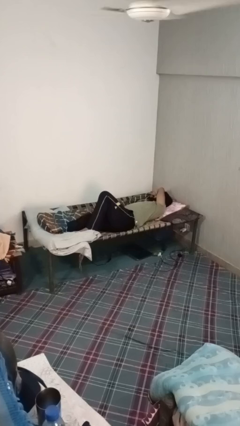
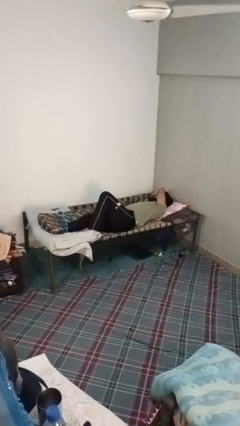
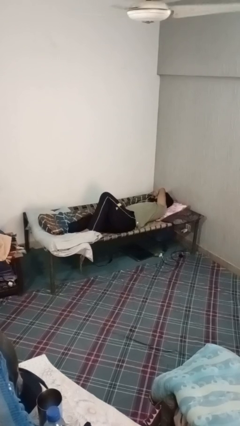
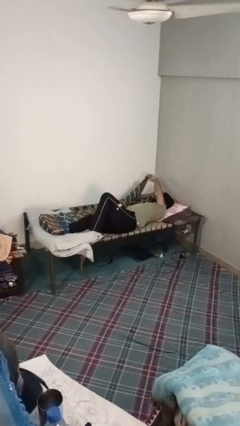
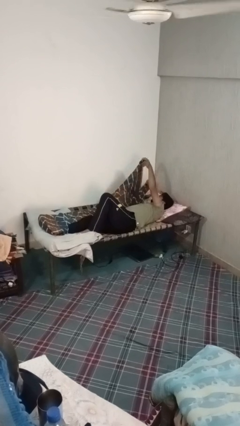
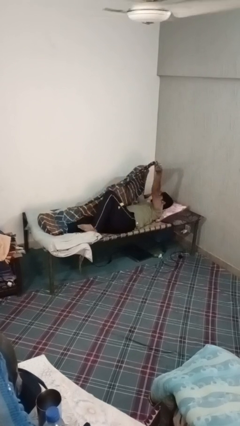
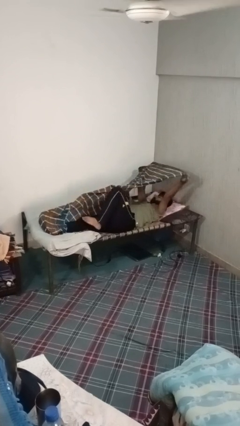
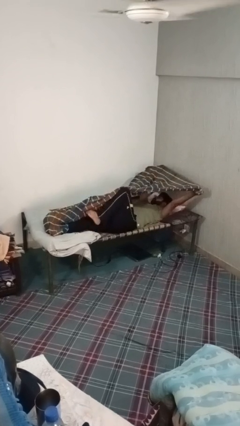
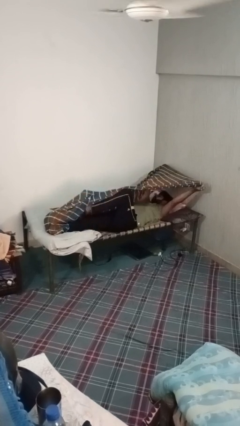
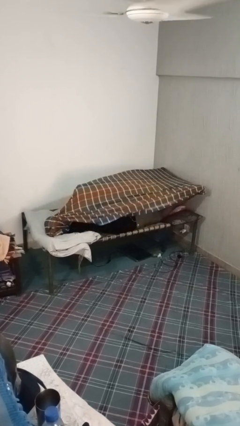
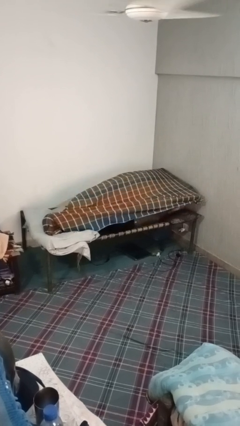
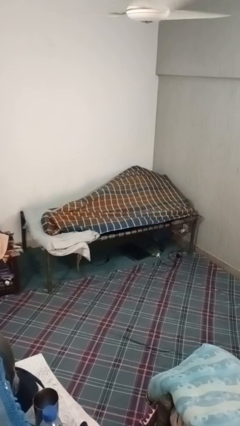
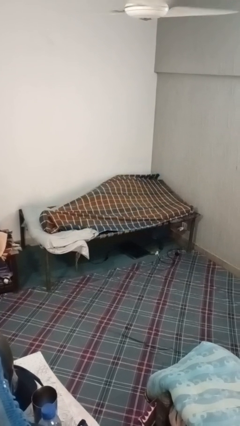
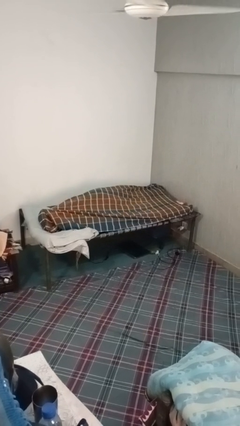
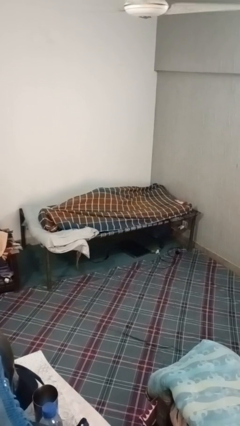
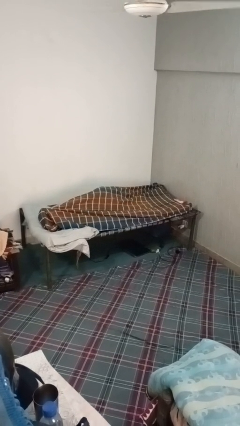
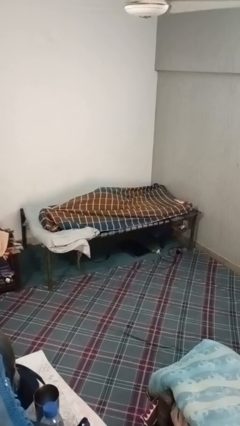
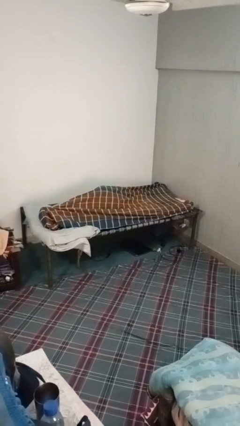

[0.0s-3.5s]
person covers with bedsheets

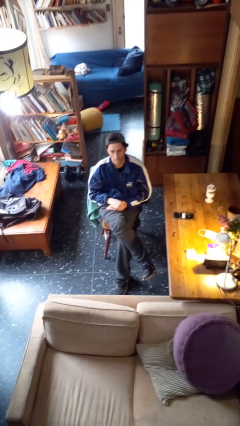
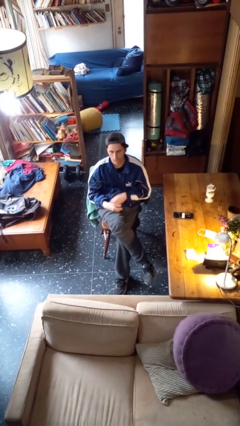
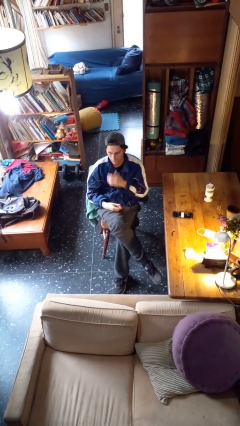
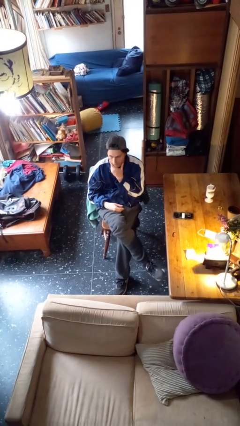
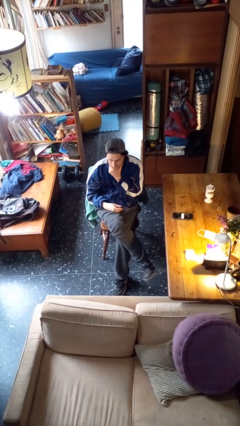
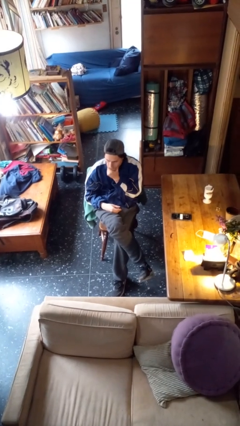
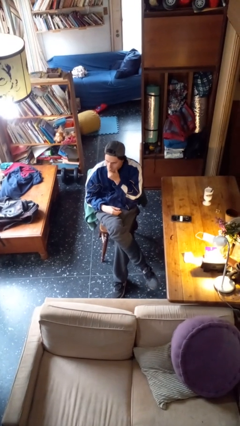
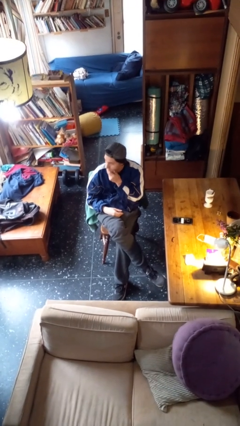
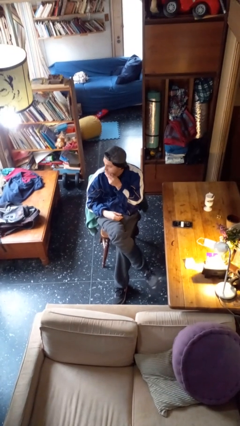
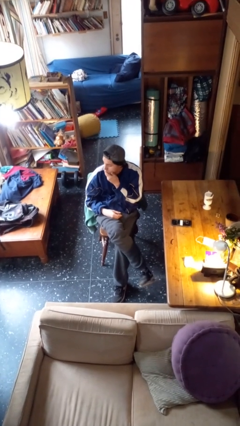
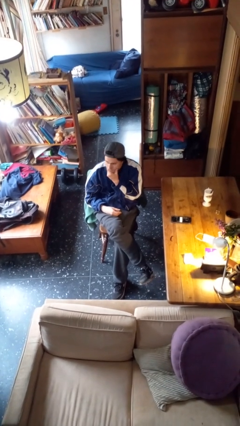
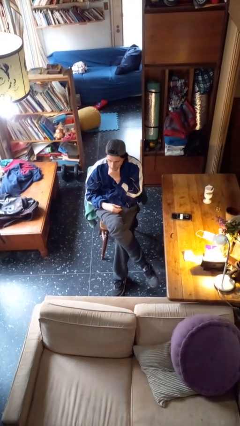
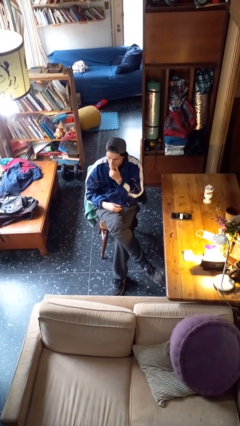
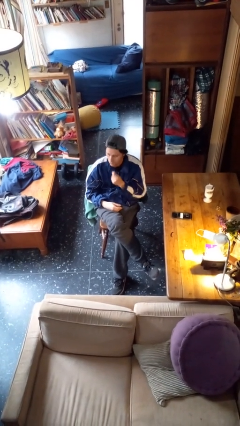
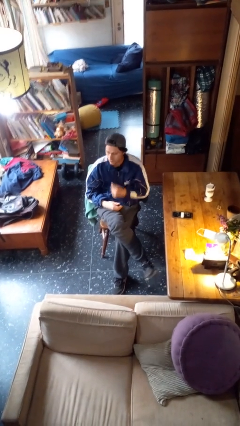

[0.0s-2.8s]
person strokes chin

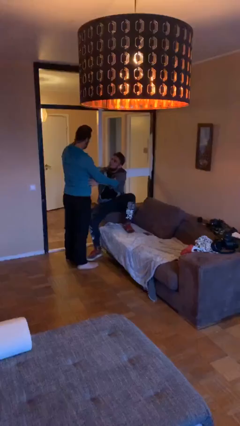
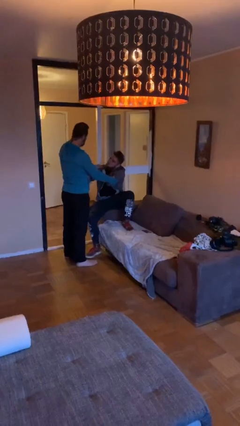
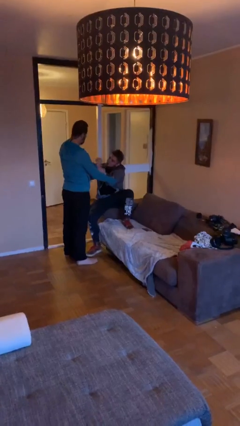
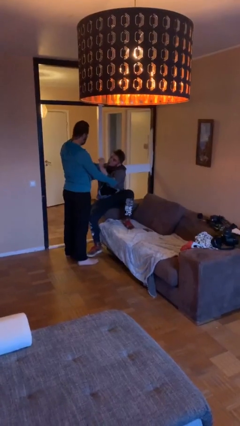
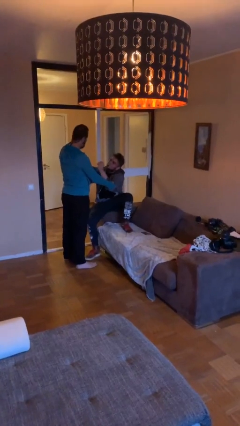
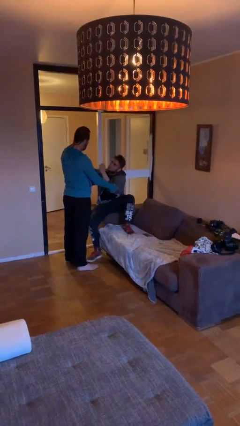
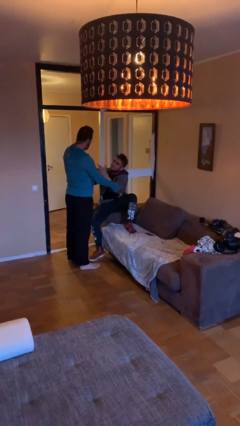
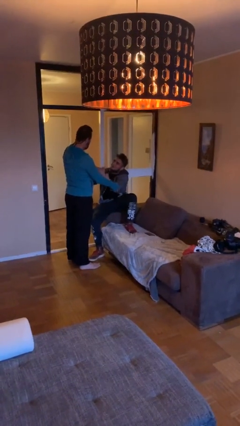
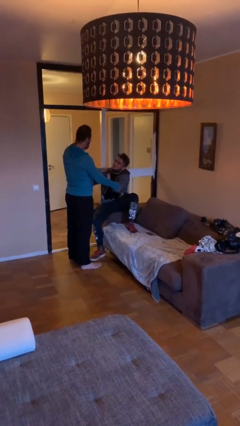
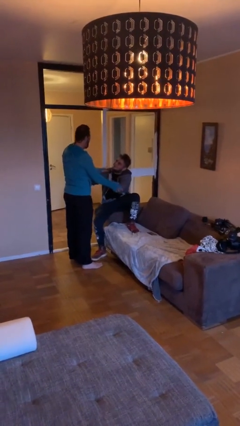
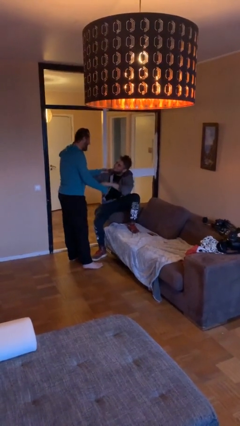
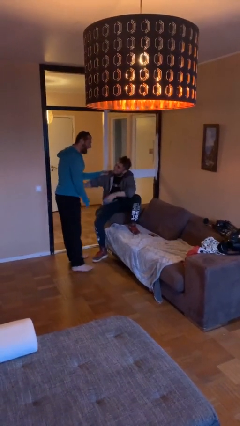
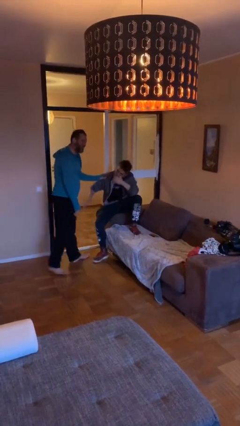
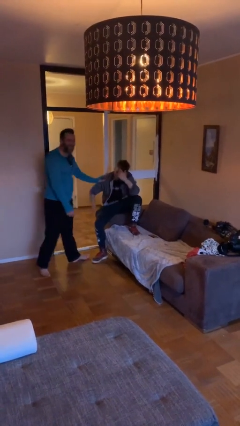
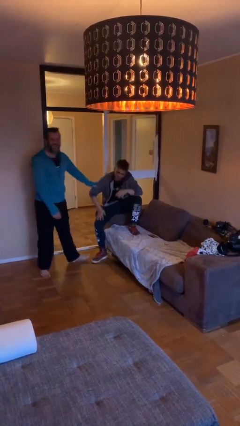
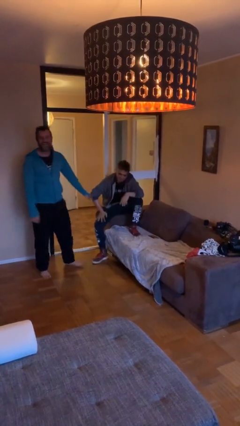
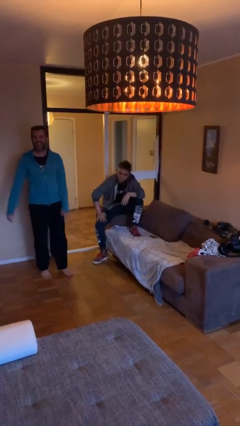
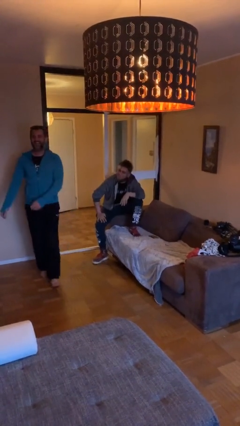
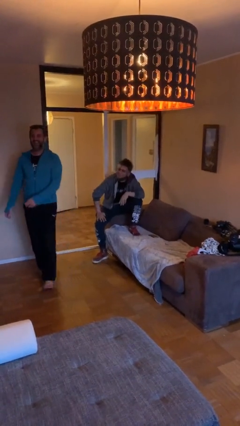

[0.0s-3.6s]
person embraces person

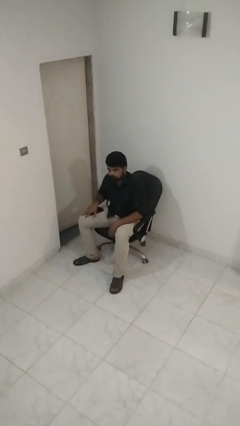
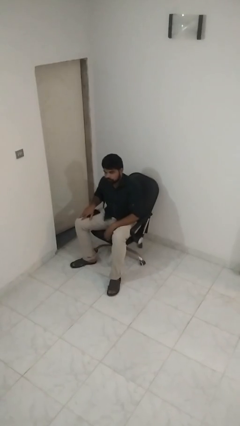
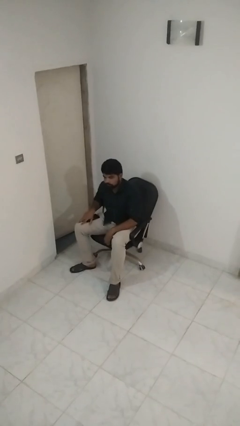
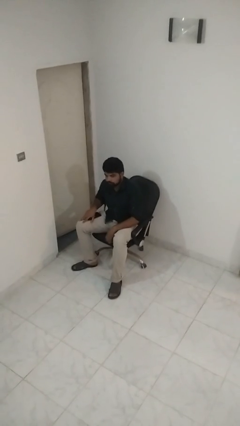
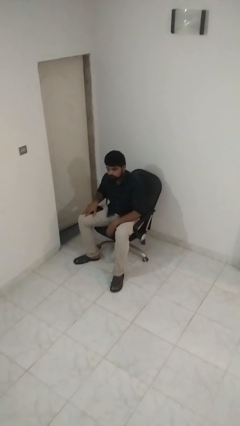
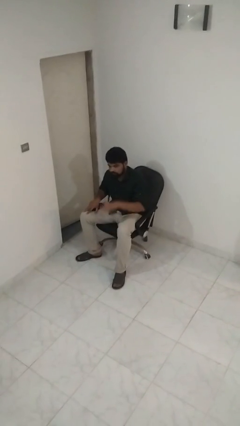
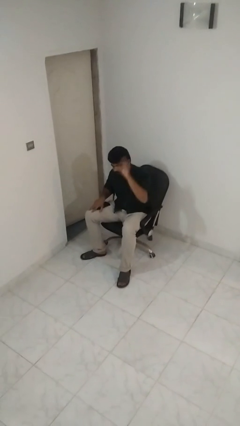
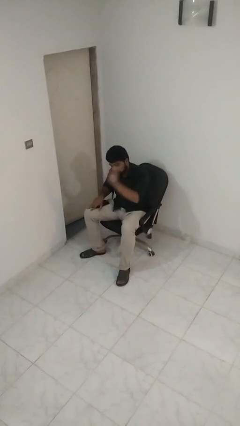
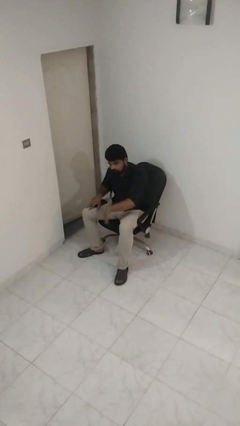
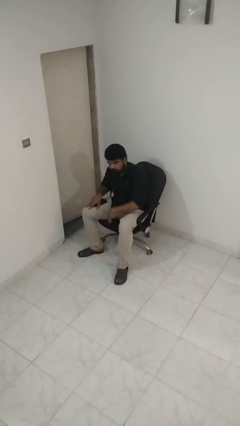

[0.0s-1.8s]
person gestures swipe down

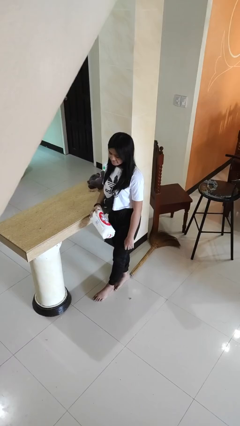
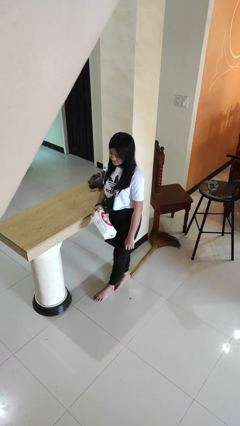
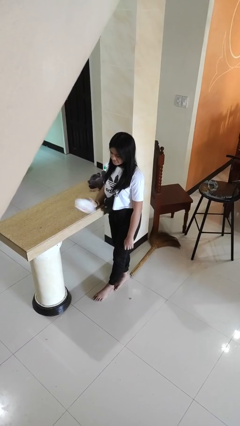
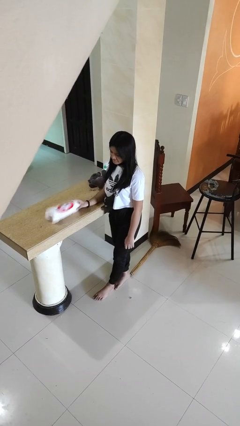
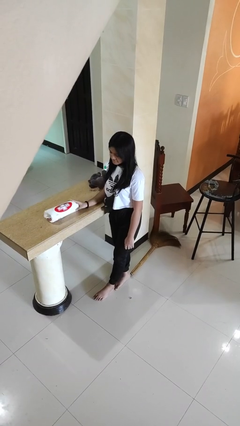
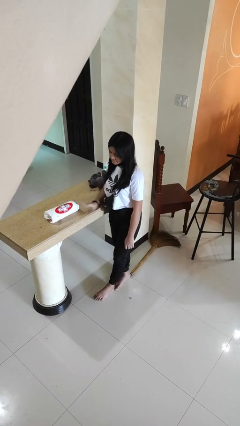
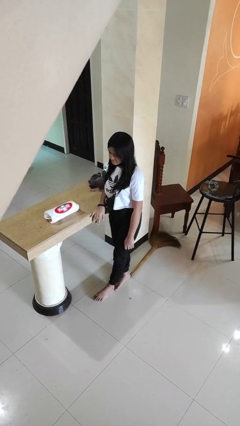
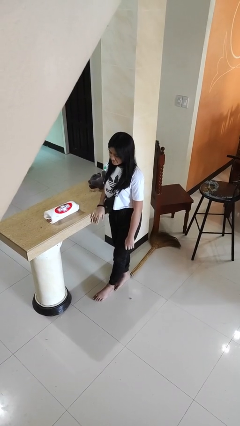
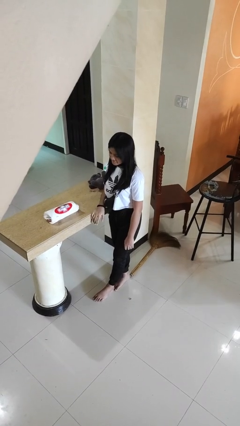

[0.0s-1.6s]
person puts down object on countertop

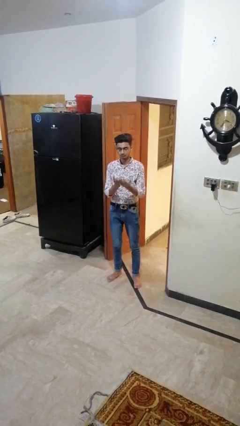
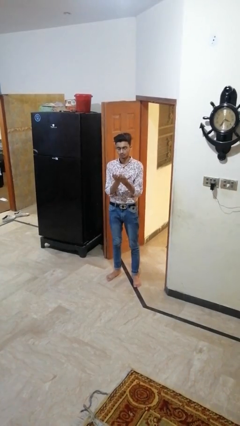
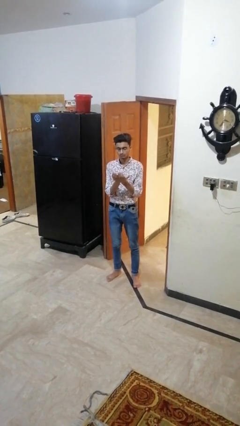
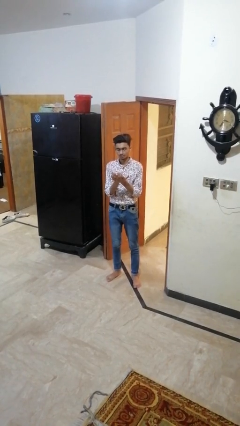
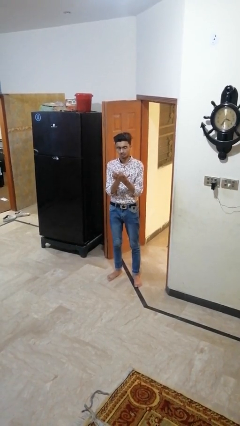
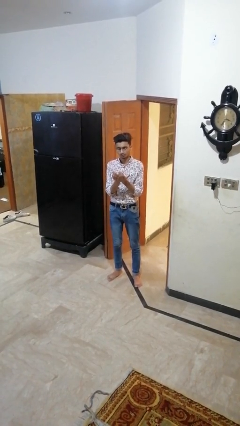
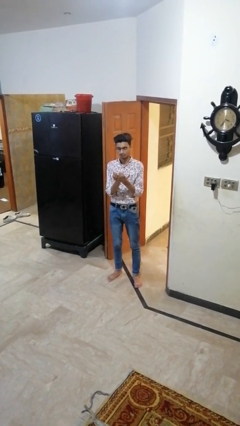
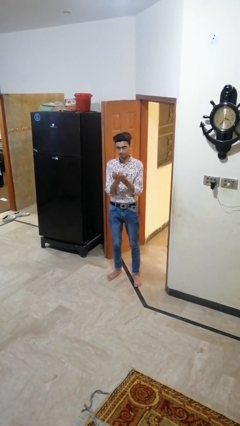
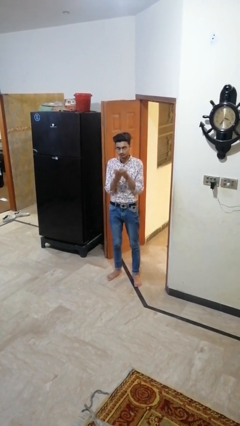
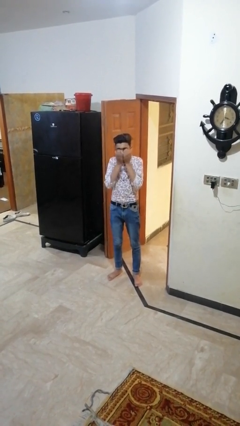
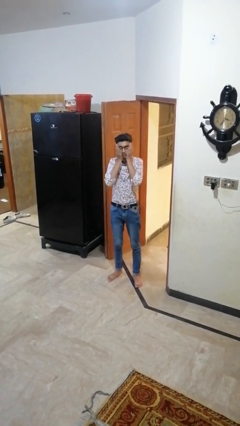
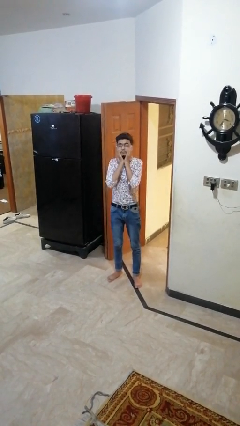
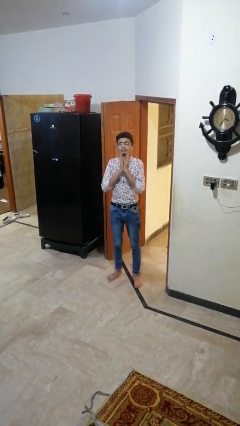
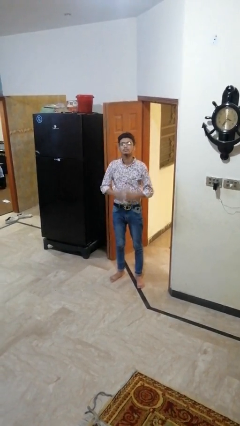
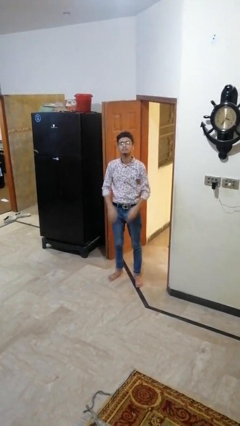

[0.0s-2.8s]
person prays

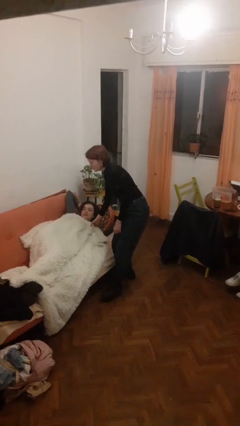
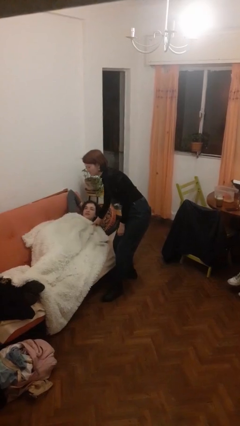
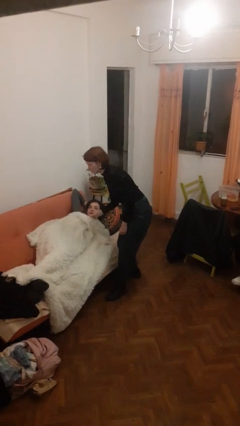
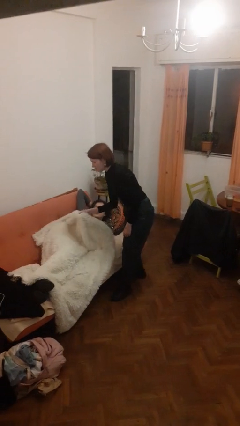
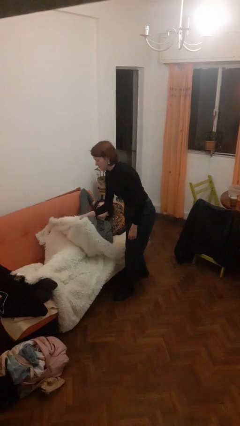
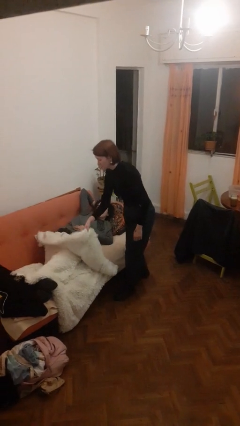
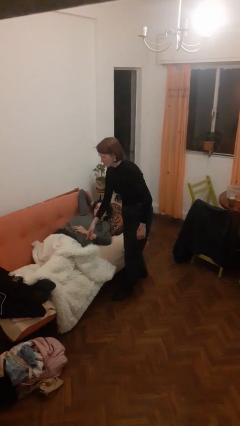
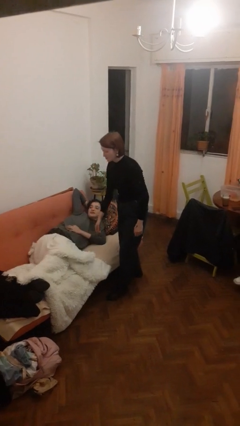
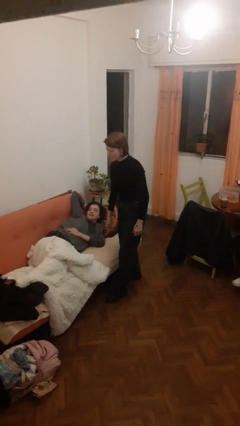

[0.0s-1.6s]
person uncovers friend with blanket
